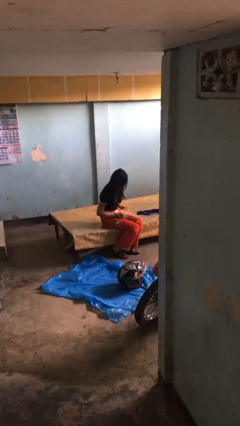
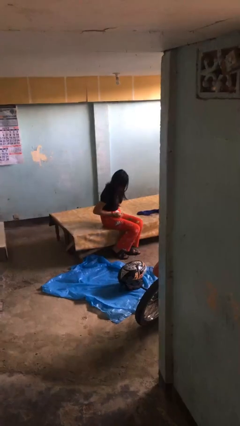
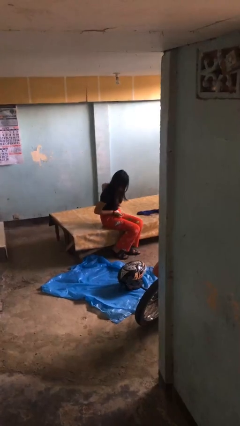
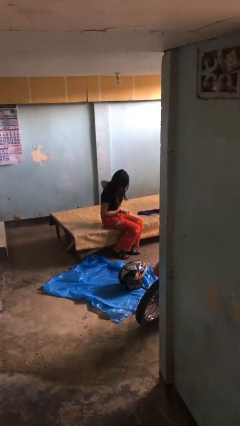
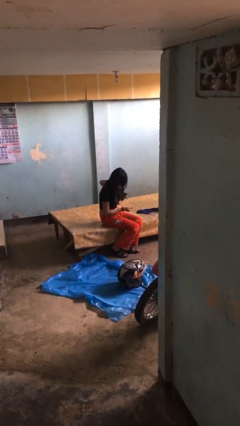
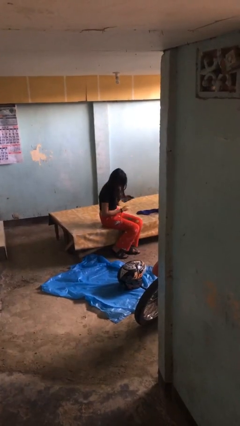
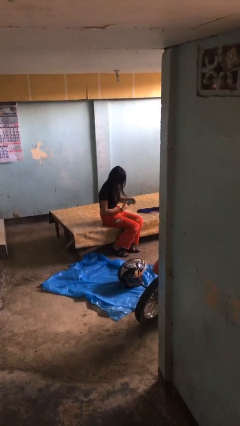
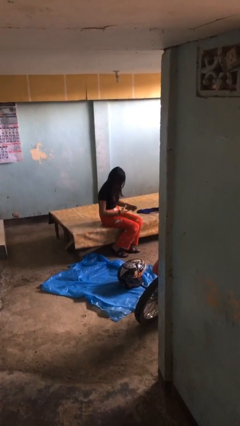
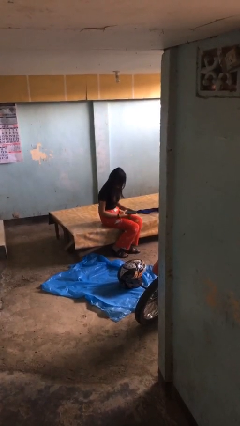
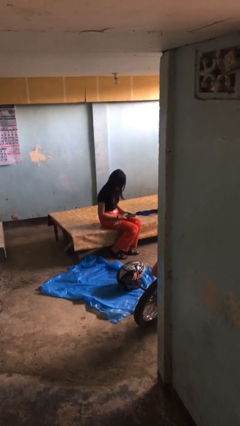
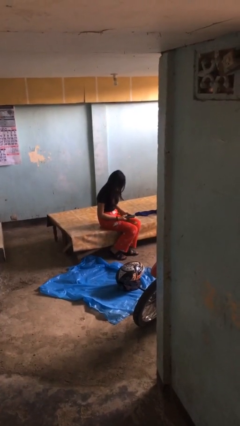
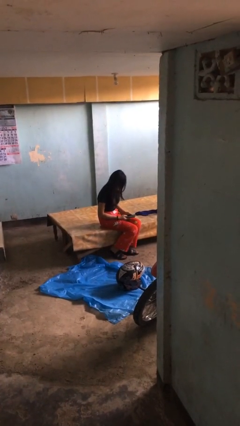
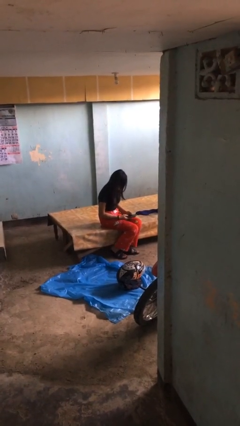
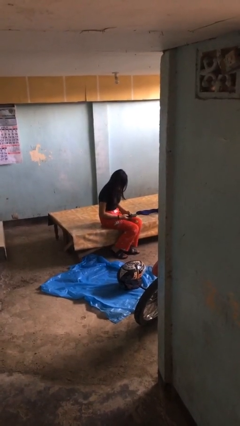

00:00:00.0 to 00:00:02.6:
person takes phone from pocket

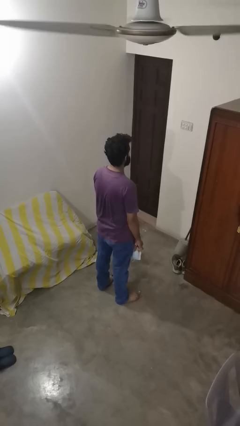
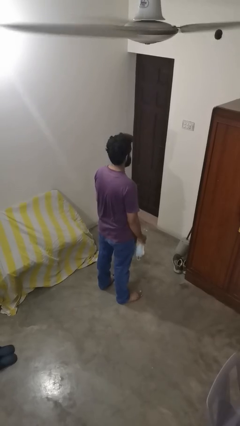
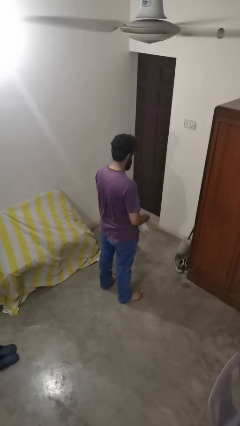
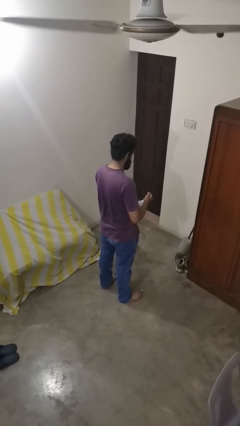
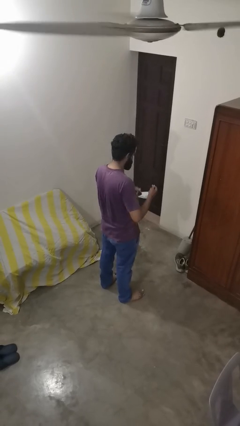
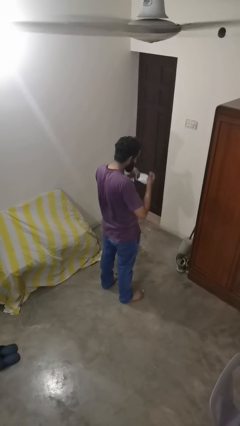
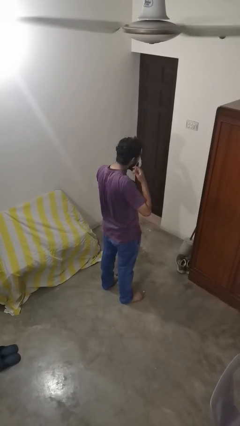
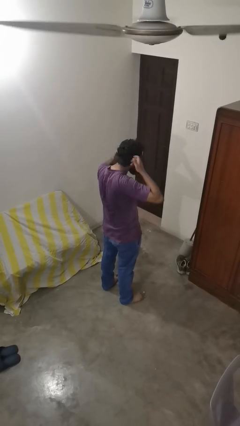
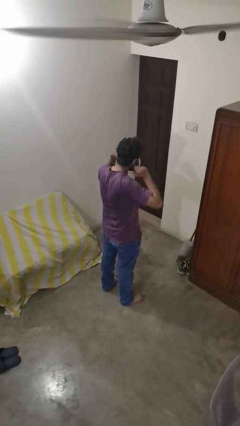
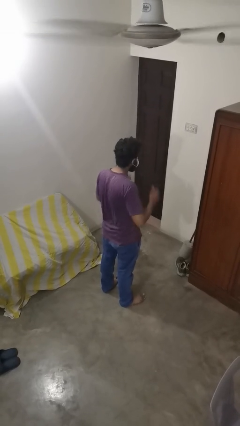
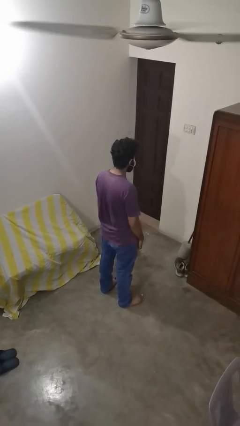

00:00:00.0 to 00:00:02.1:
person puts on facemask

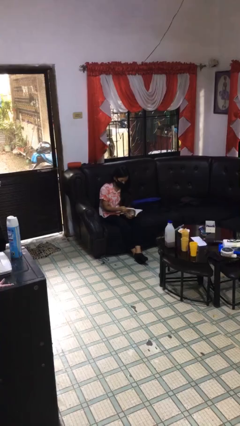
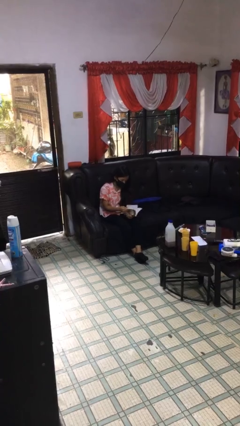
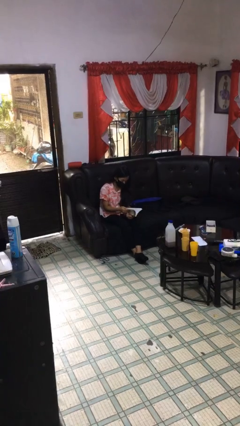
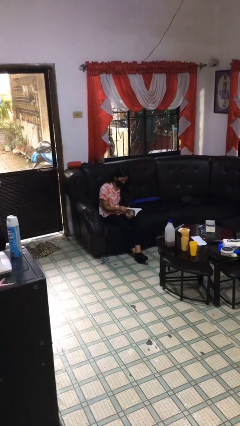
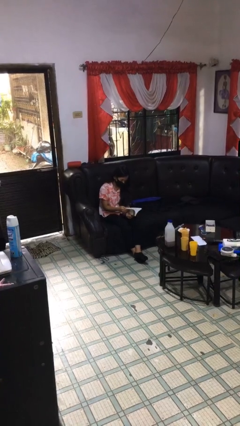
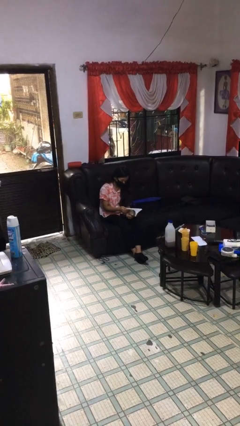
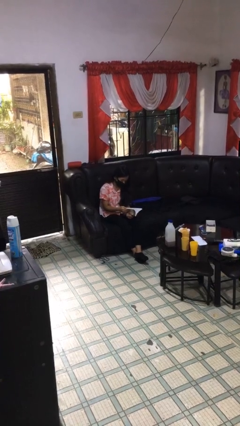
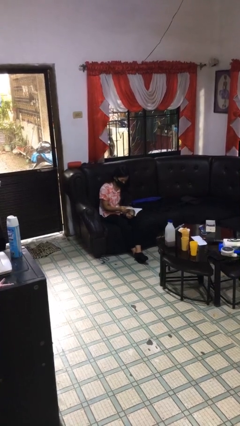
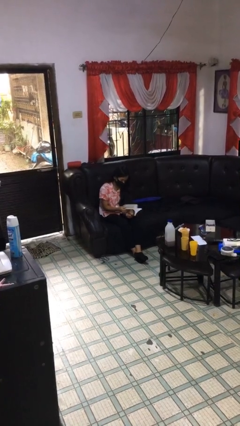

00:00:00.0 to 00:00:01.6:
person reads document

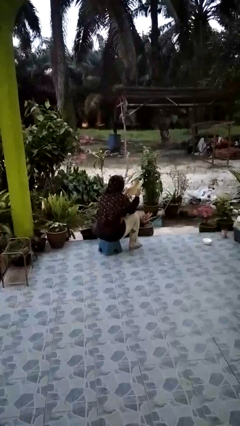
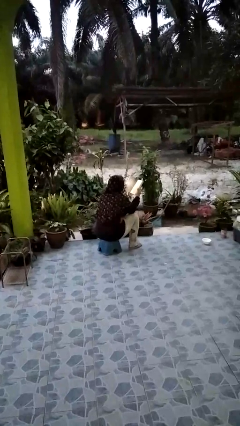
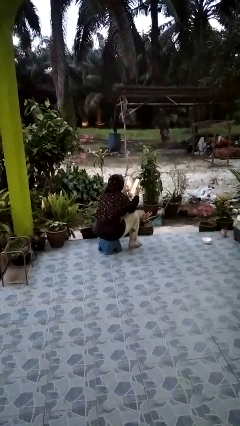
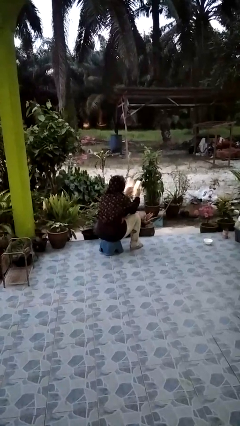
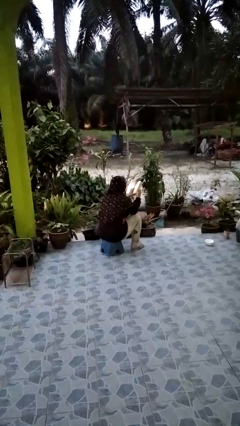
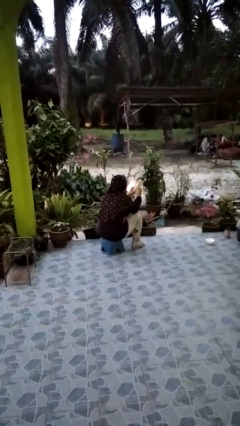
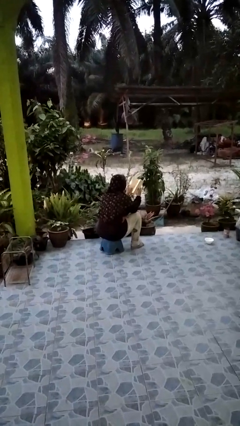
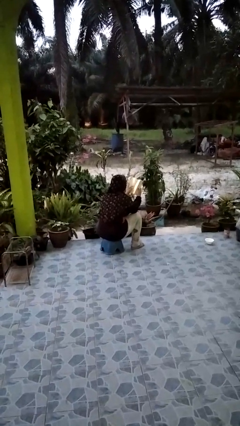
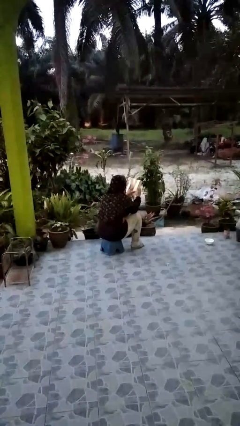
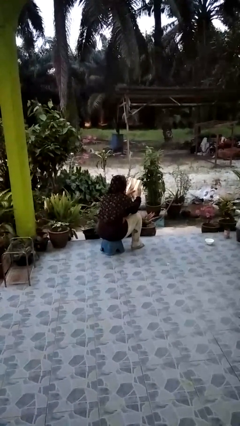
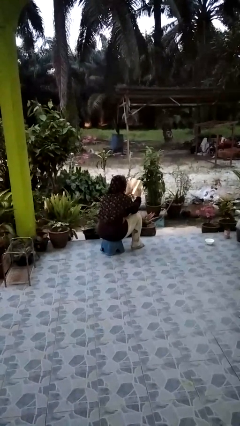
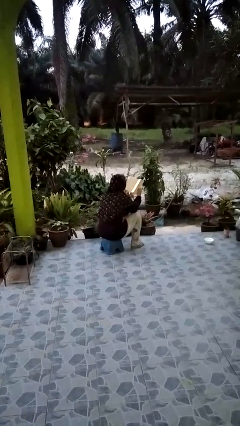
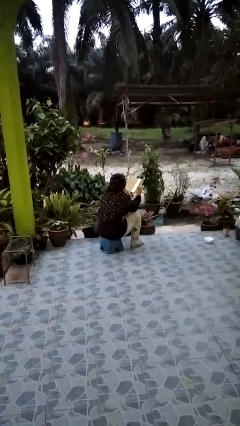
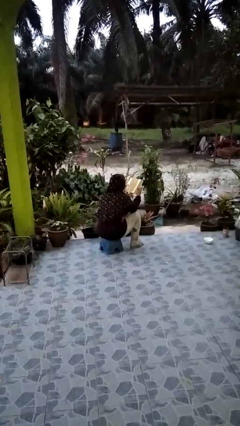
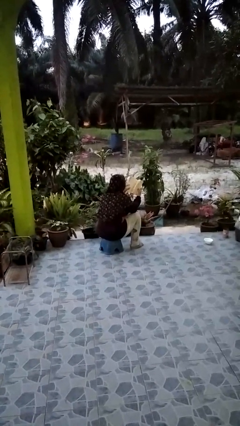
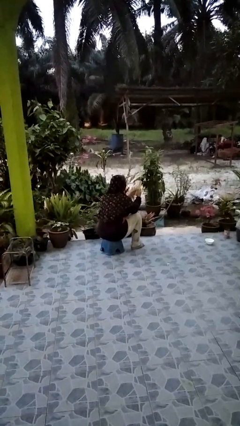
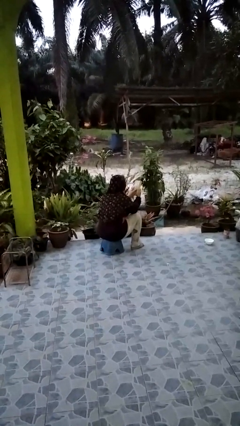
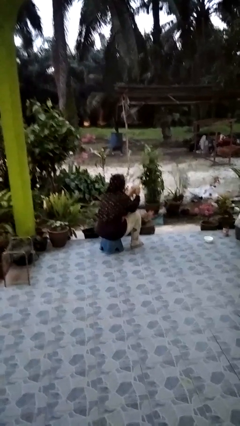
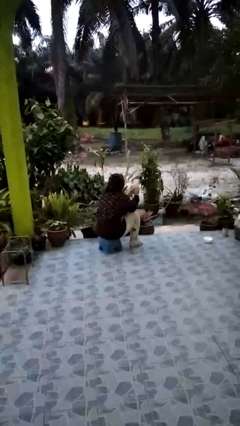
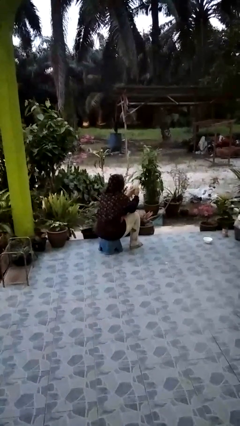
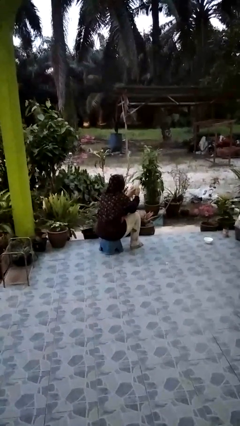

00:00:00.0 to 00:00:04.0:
person reads book

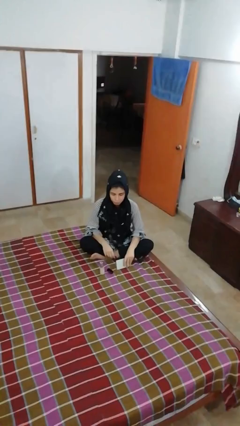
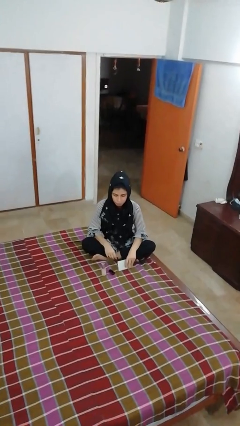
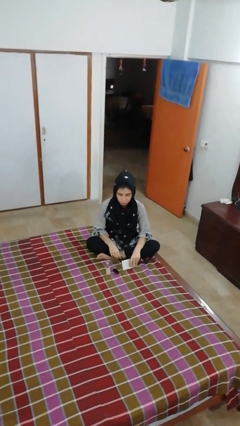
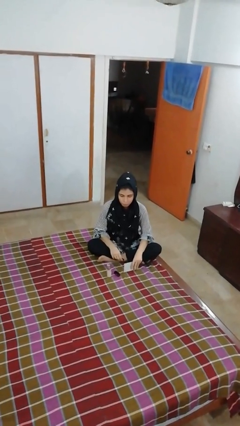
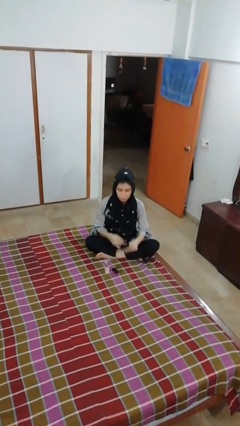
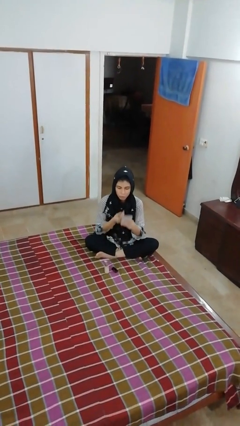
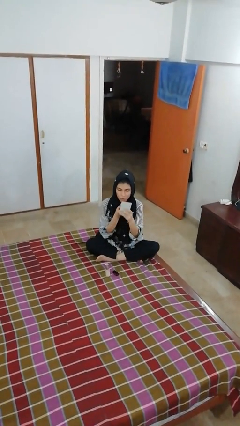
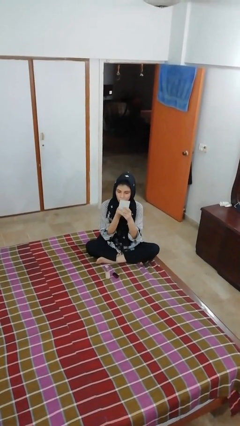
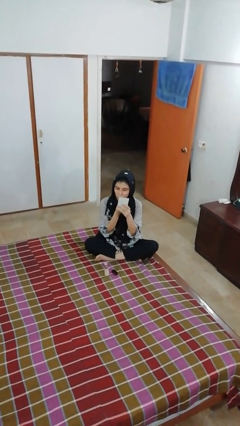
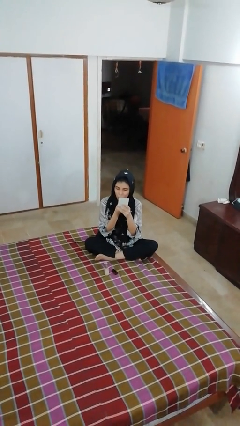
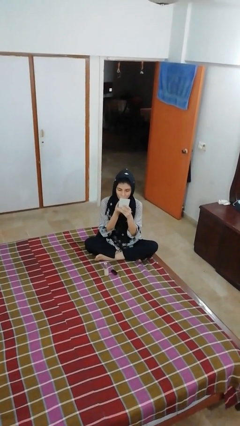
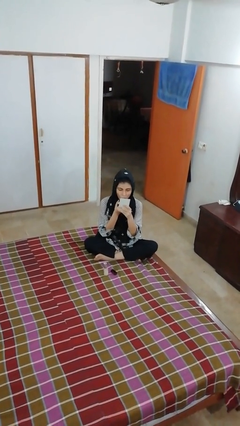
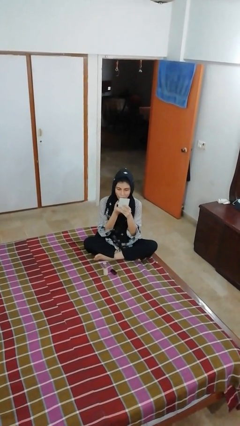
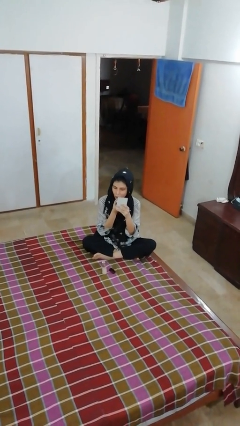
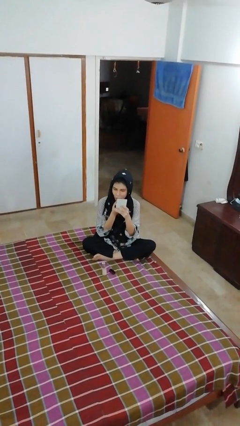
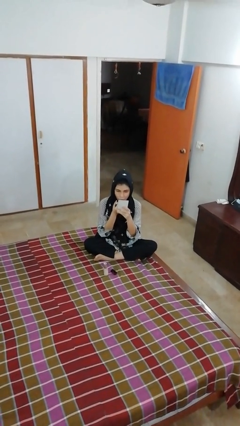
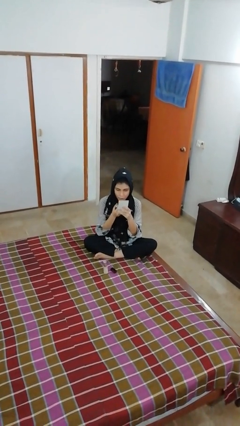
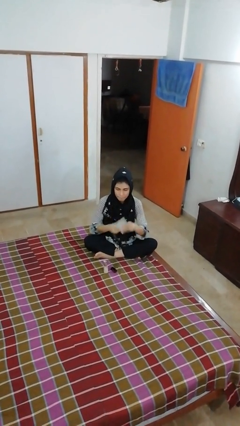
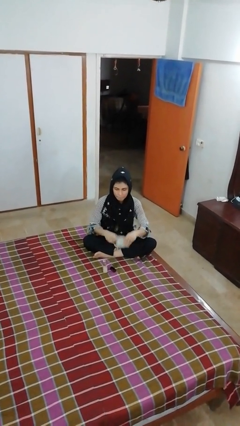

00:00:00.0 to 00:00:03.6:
person applies lip makeup

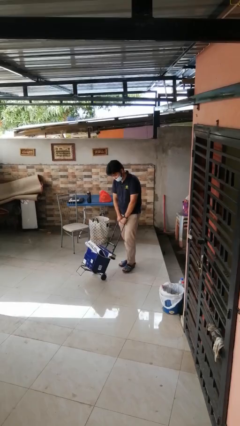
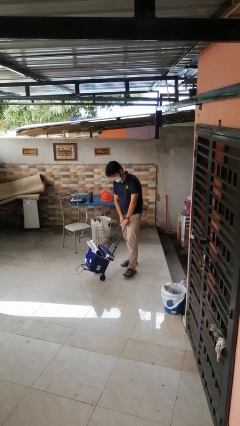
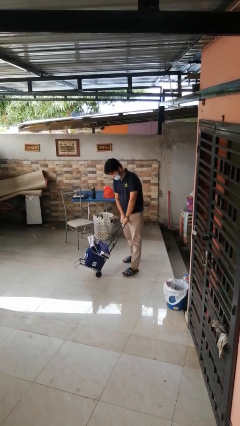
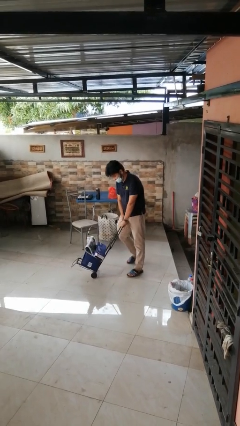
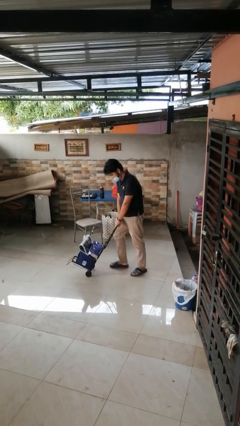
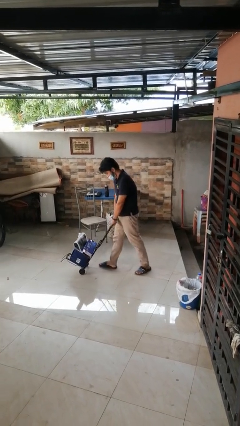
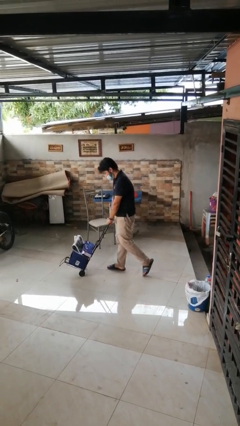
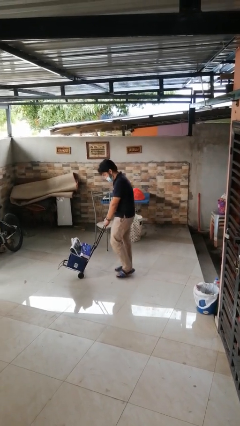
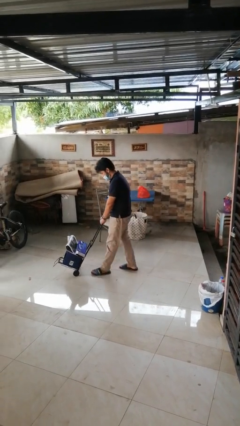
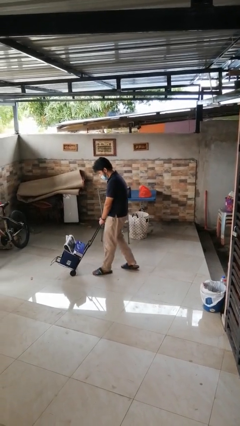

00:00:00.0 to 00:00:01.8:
person pushes wheeled cart

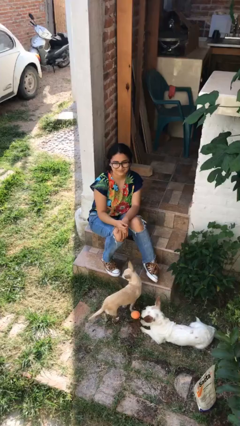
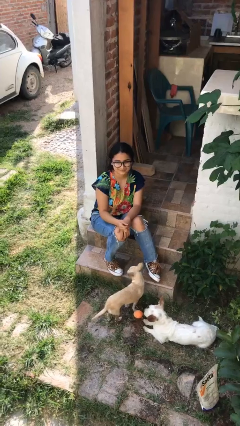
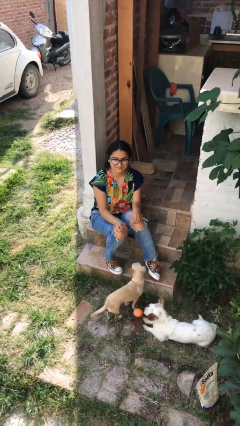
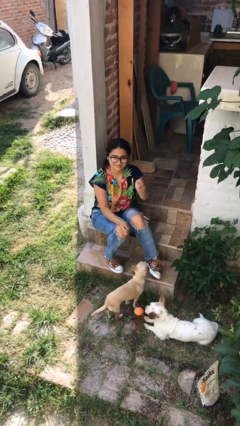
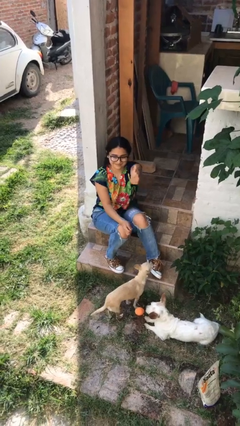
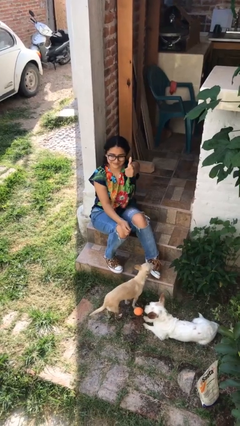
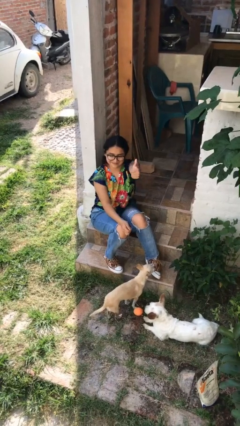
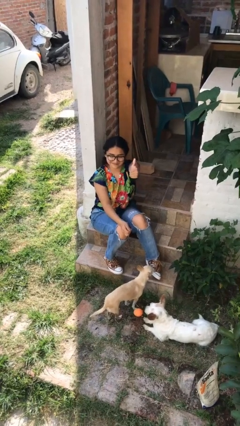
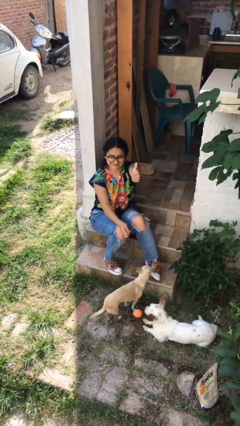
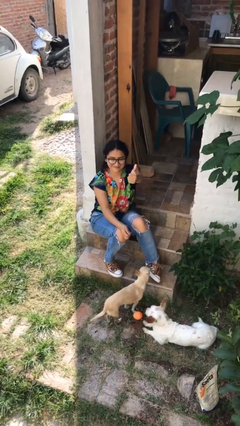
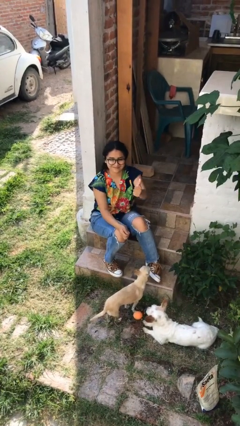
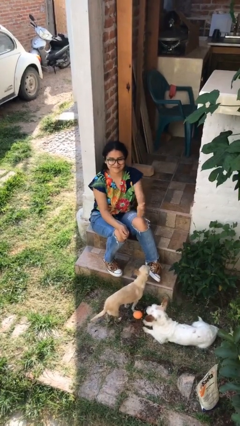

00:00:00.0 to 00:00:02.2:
person gestures thumbs up
